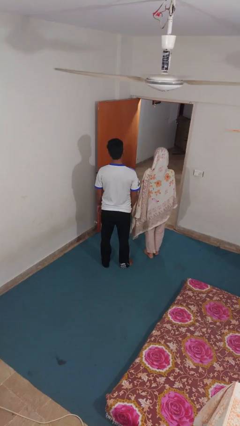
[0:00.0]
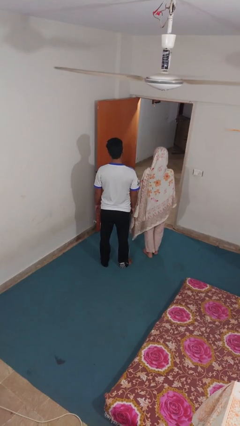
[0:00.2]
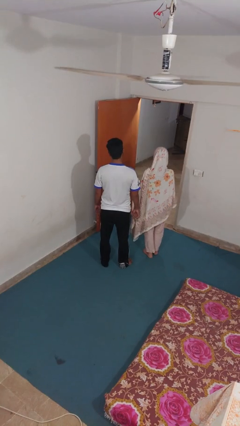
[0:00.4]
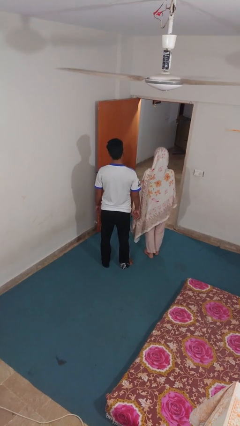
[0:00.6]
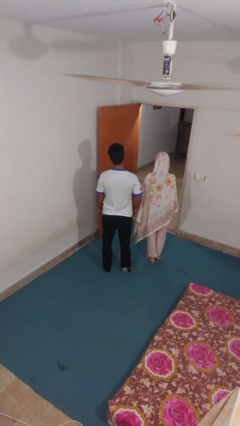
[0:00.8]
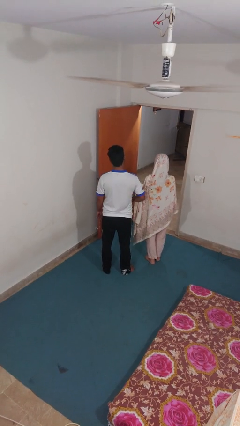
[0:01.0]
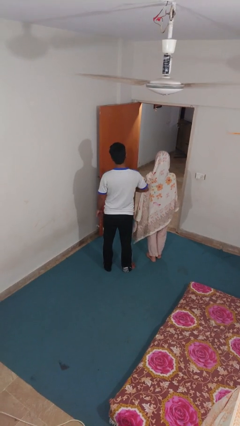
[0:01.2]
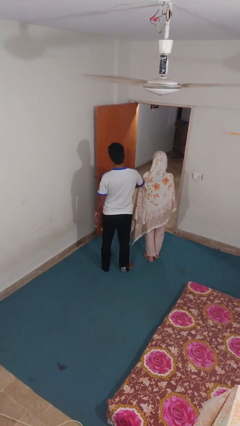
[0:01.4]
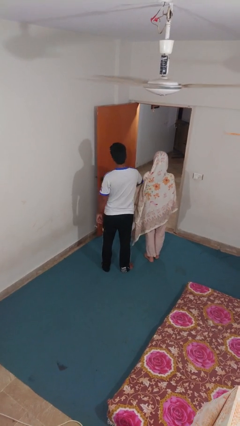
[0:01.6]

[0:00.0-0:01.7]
person nudges person with elbow

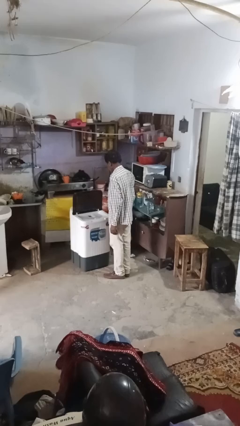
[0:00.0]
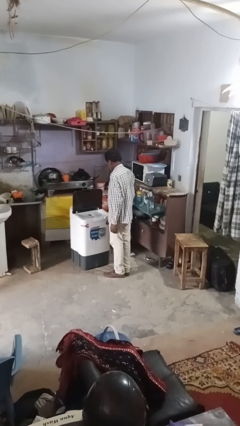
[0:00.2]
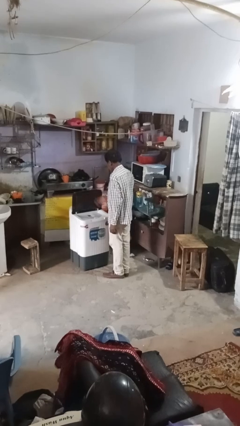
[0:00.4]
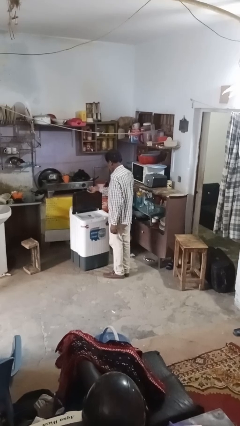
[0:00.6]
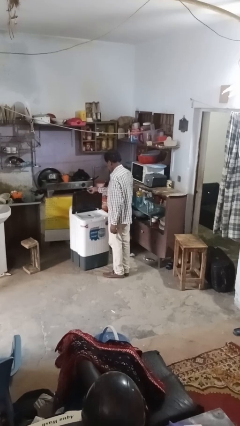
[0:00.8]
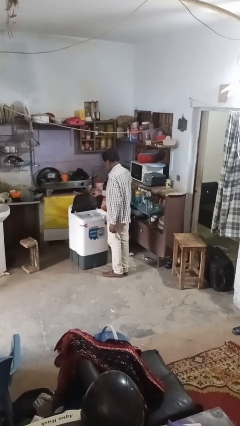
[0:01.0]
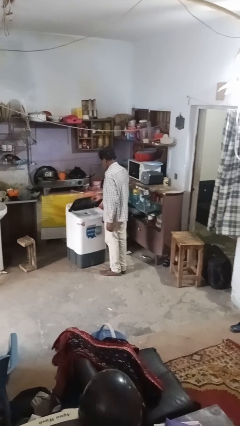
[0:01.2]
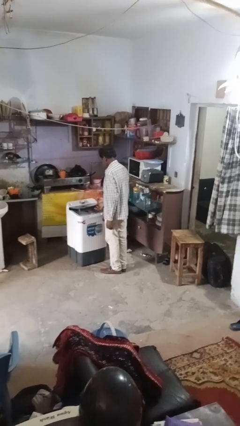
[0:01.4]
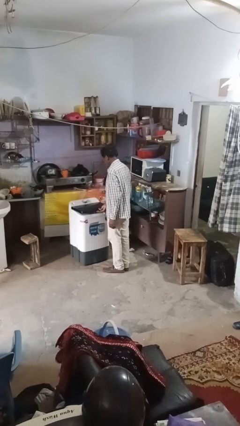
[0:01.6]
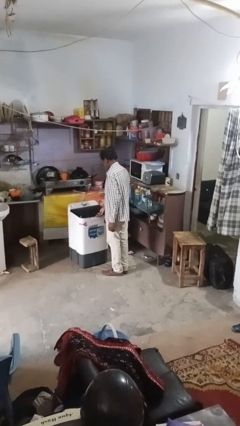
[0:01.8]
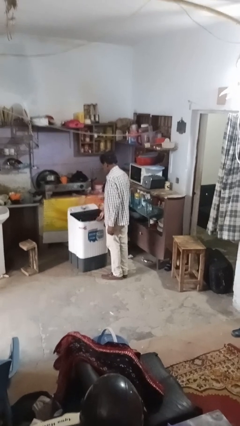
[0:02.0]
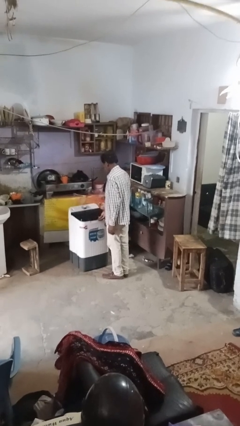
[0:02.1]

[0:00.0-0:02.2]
person closes clothes washer

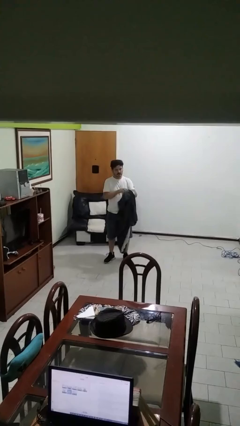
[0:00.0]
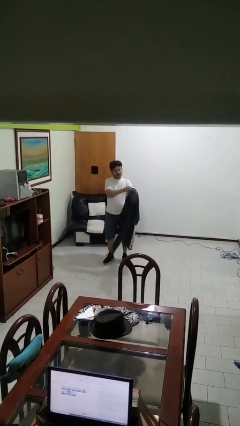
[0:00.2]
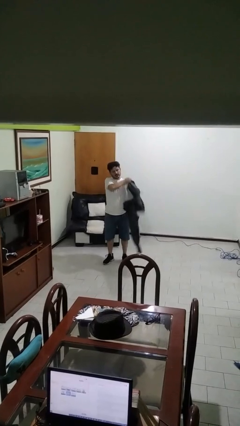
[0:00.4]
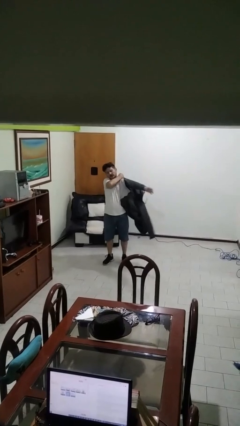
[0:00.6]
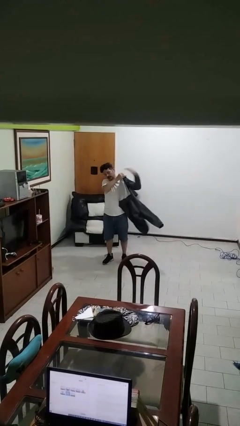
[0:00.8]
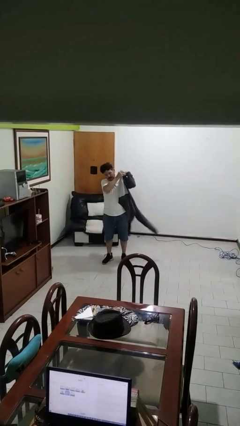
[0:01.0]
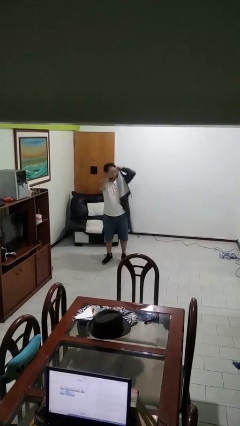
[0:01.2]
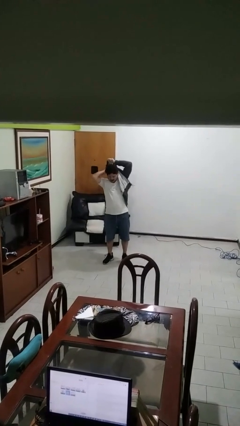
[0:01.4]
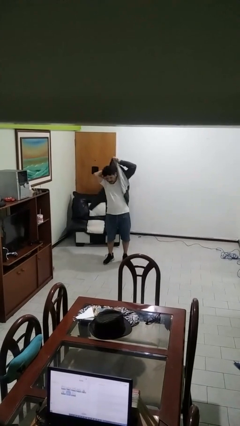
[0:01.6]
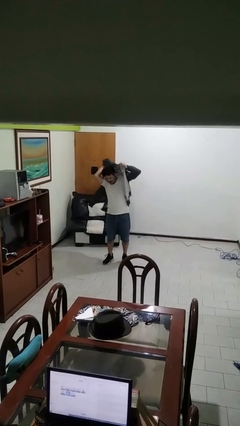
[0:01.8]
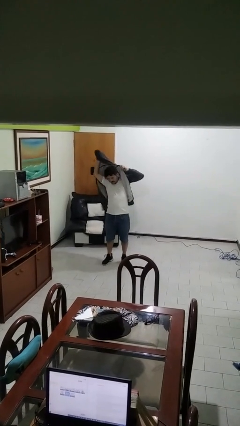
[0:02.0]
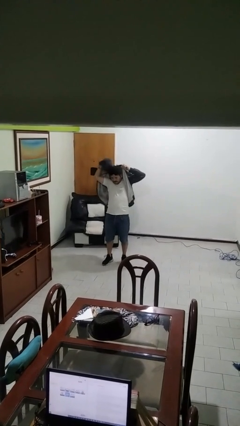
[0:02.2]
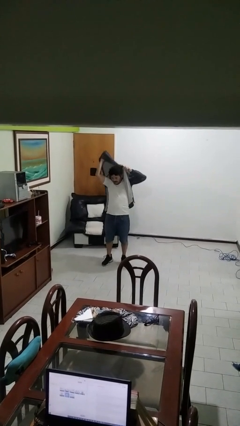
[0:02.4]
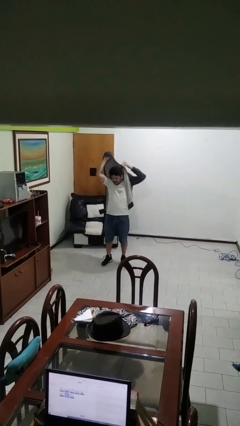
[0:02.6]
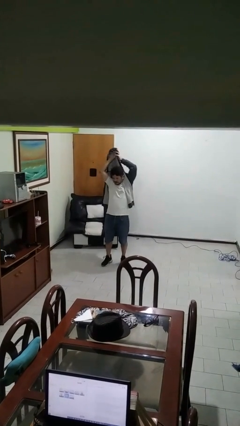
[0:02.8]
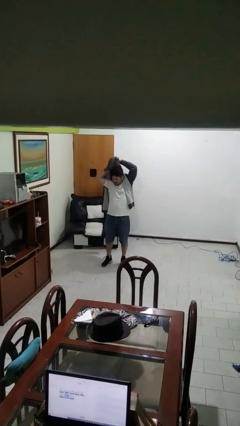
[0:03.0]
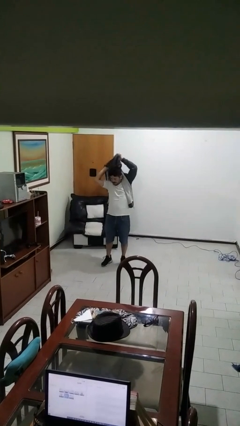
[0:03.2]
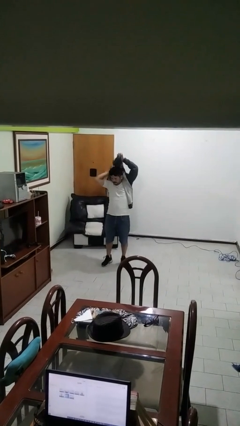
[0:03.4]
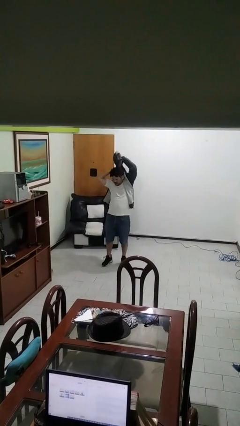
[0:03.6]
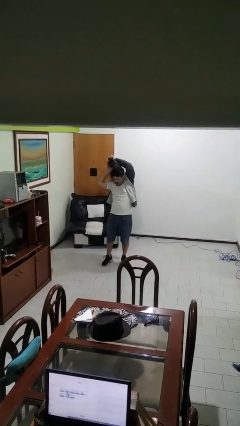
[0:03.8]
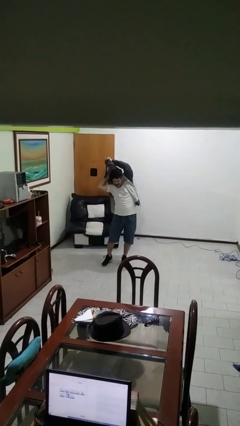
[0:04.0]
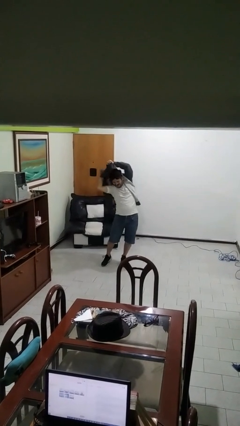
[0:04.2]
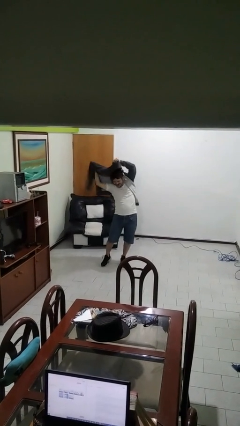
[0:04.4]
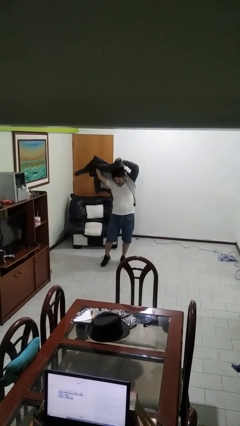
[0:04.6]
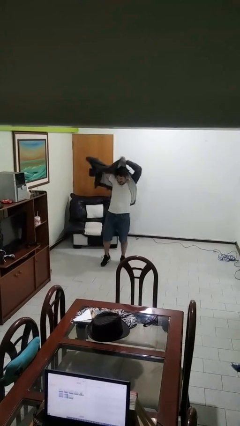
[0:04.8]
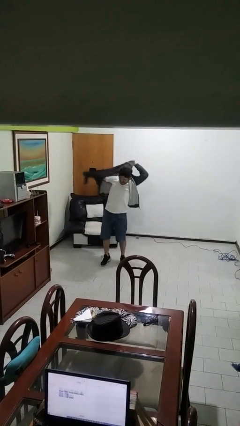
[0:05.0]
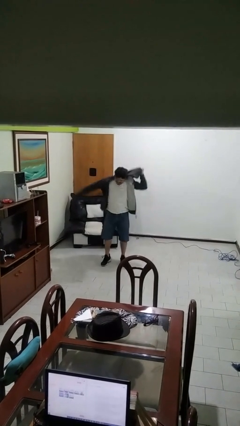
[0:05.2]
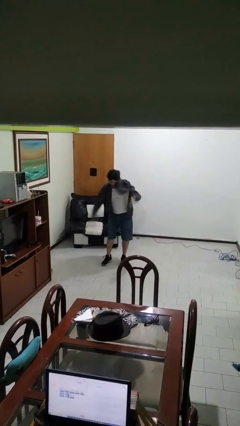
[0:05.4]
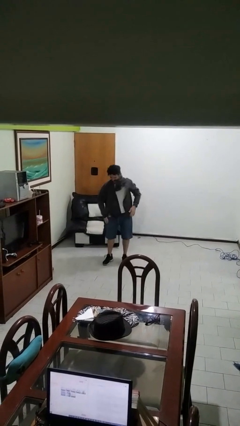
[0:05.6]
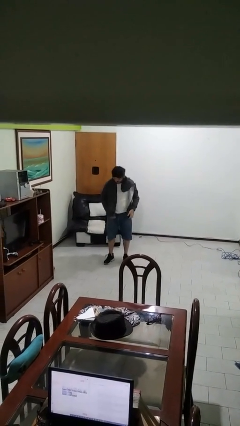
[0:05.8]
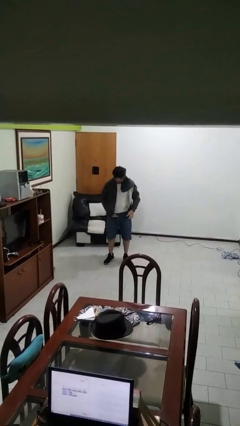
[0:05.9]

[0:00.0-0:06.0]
person puts on jacket

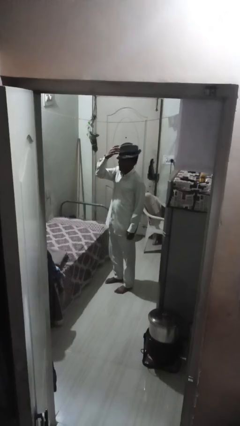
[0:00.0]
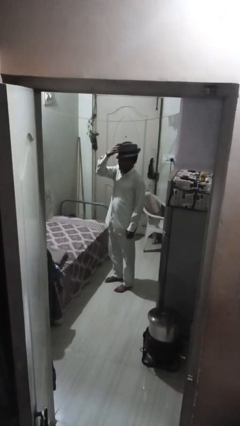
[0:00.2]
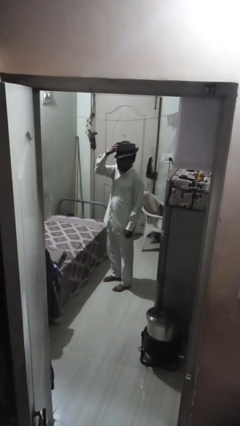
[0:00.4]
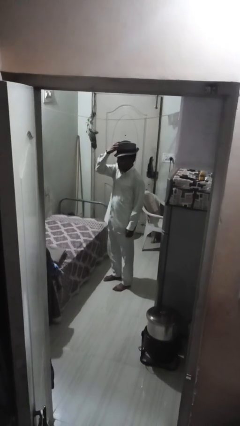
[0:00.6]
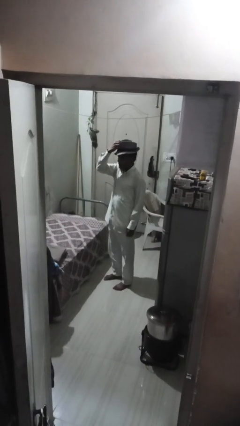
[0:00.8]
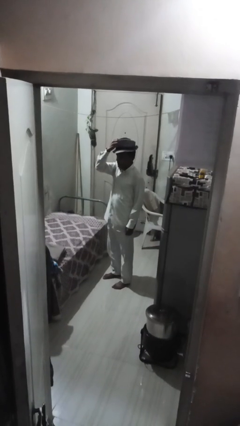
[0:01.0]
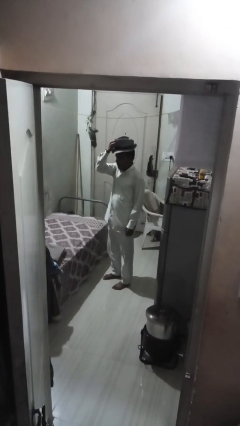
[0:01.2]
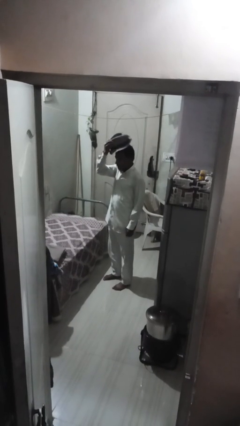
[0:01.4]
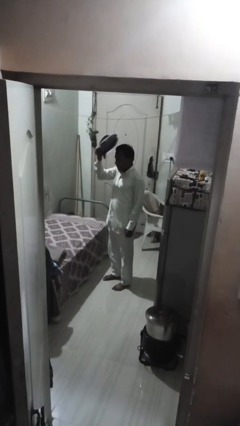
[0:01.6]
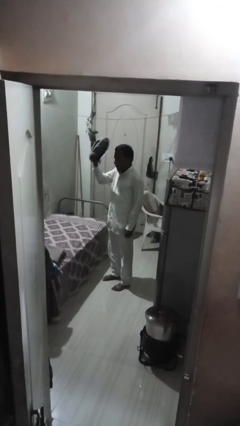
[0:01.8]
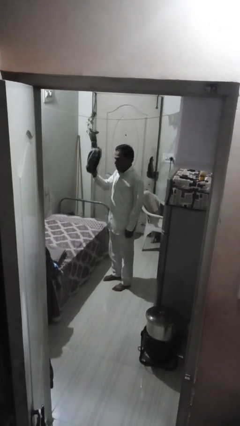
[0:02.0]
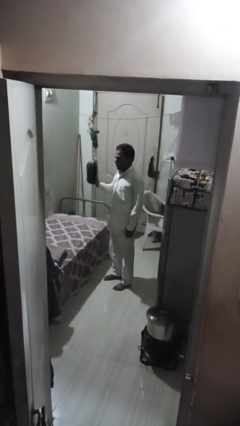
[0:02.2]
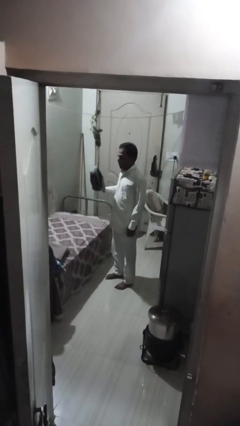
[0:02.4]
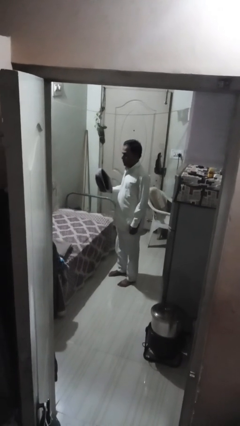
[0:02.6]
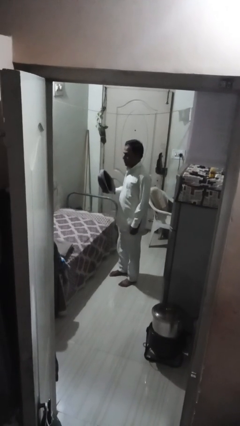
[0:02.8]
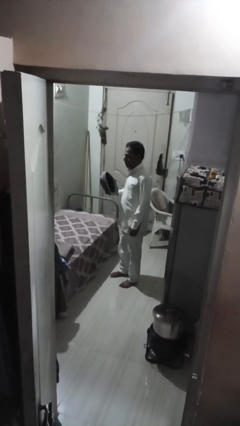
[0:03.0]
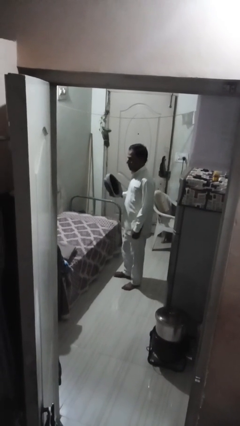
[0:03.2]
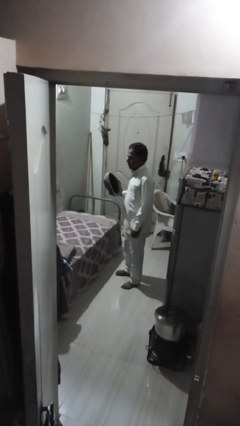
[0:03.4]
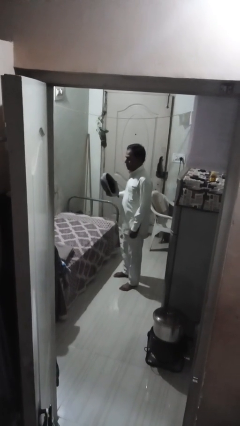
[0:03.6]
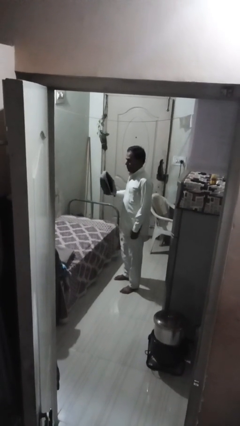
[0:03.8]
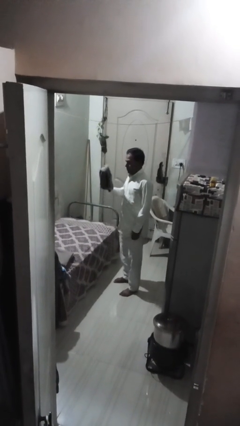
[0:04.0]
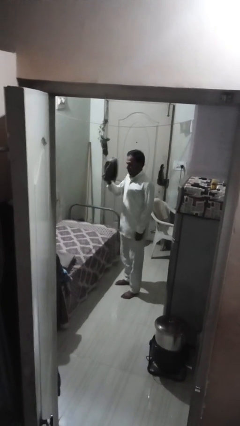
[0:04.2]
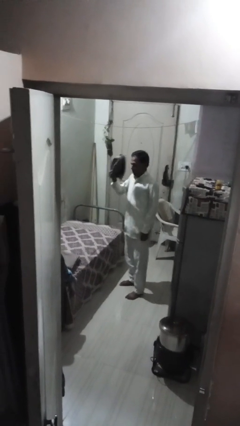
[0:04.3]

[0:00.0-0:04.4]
person takes off hat

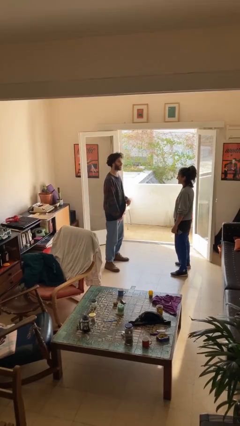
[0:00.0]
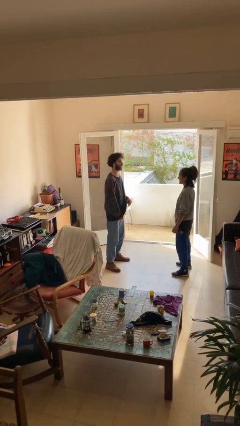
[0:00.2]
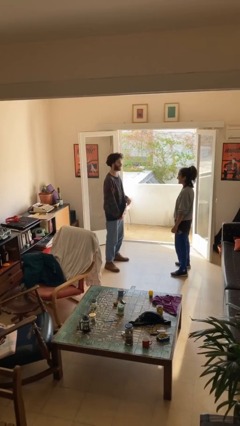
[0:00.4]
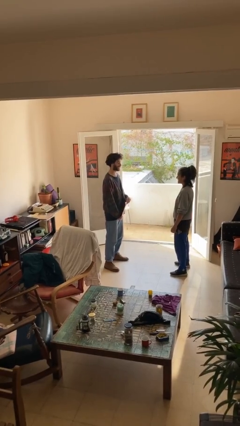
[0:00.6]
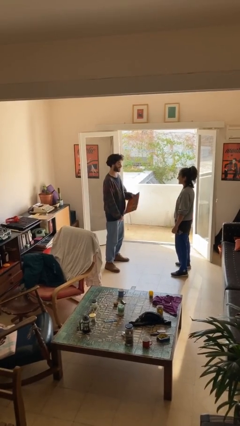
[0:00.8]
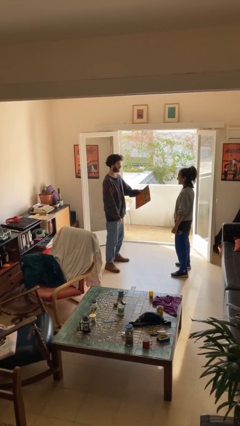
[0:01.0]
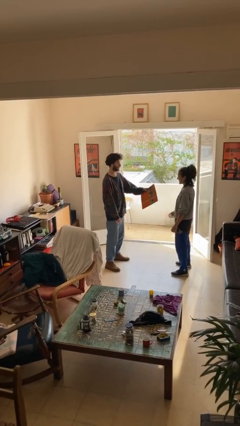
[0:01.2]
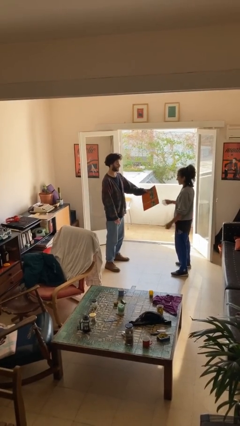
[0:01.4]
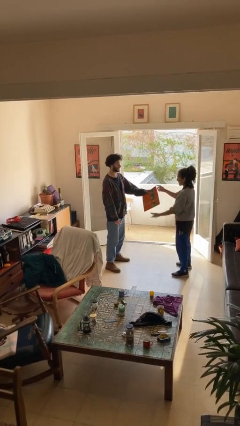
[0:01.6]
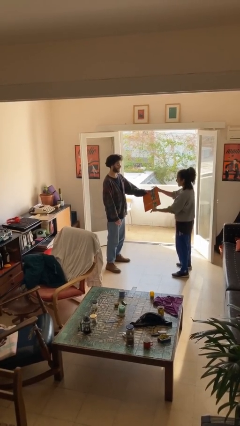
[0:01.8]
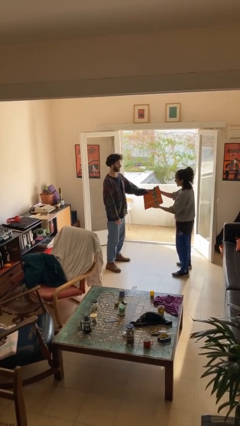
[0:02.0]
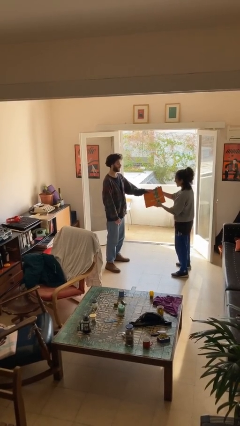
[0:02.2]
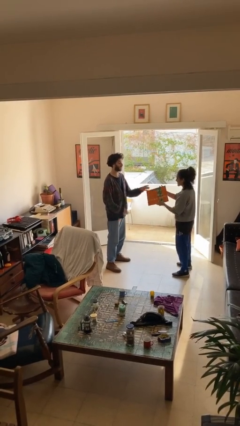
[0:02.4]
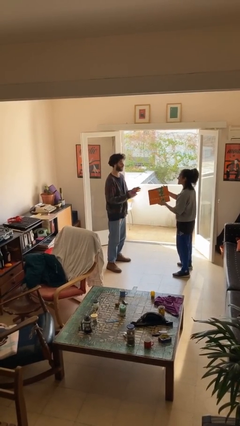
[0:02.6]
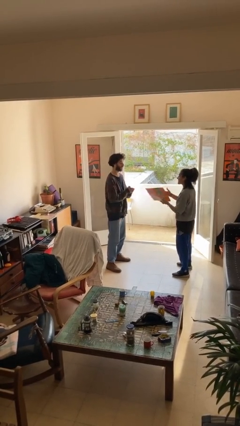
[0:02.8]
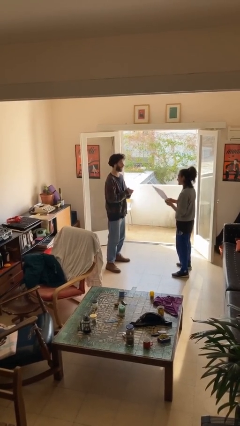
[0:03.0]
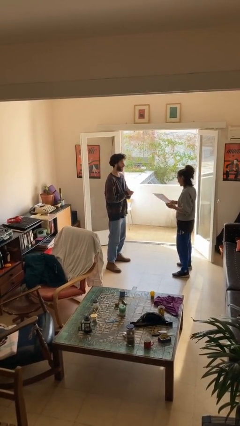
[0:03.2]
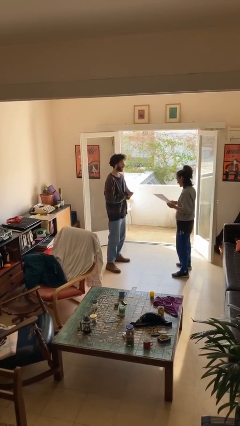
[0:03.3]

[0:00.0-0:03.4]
person transfers object to person
